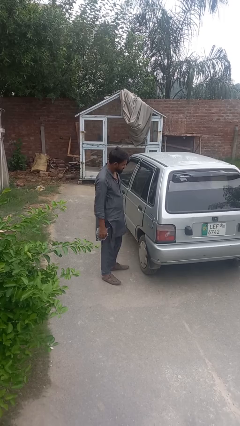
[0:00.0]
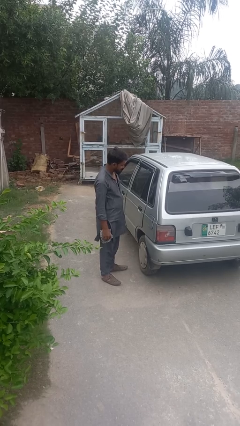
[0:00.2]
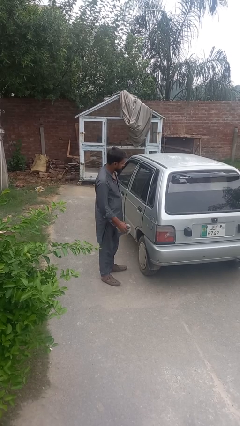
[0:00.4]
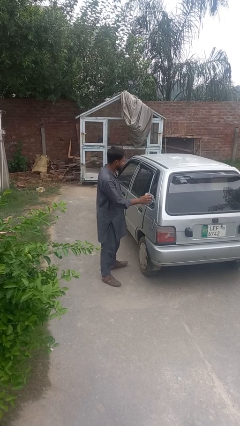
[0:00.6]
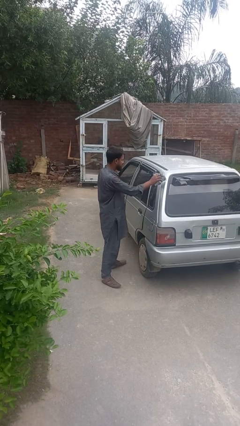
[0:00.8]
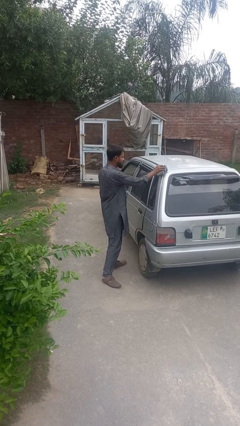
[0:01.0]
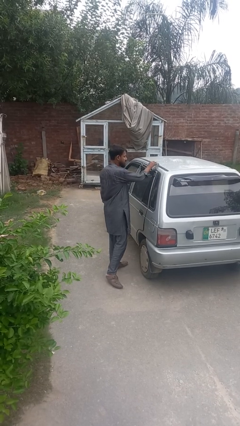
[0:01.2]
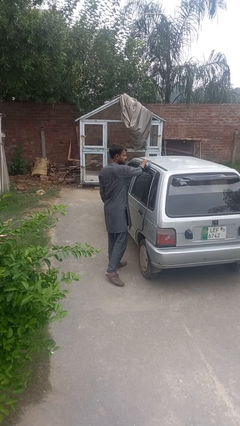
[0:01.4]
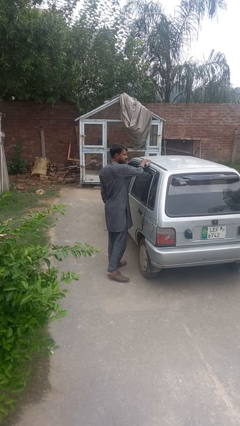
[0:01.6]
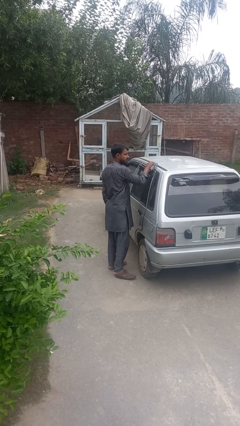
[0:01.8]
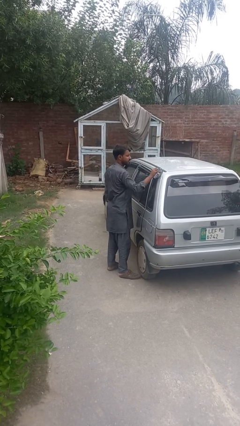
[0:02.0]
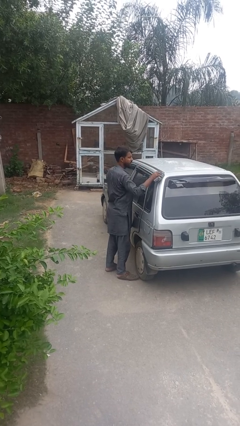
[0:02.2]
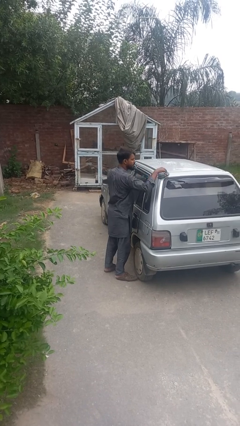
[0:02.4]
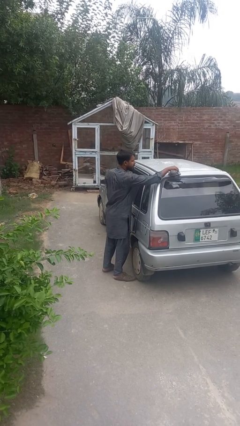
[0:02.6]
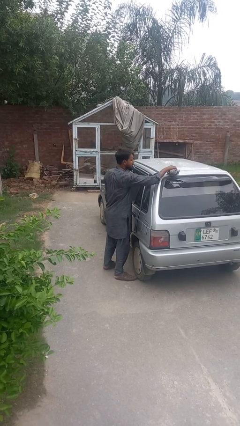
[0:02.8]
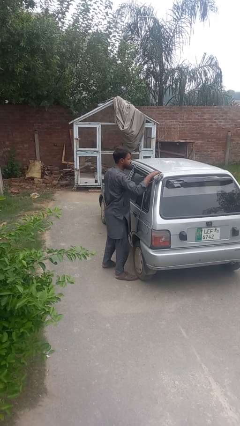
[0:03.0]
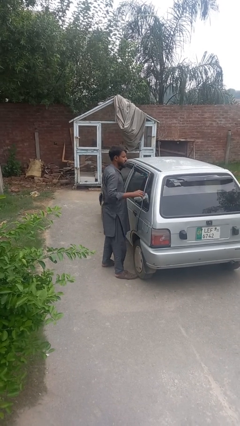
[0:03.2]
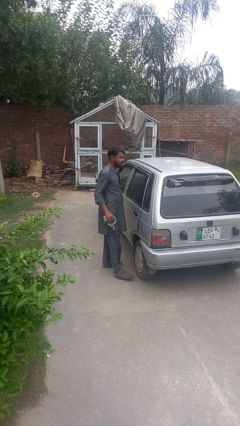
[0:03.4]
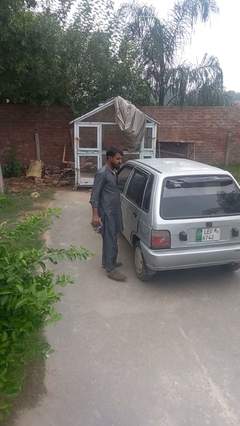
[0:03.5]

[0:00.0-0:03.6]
person polishes car with rag

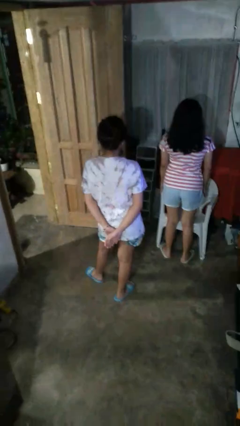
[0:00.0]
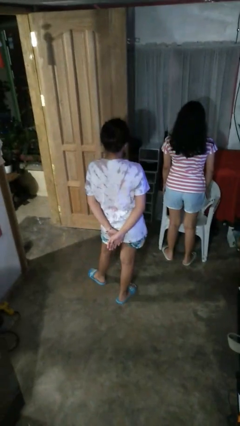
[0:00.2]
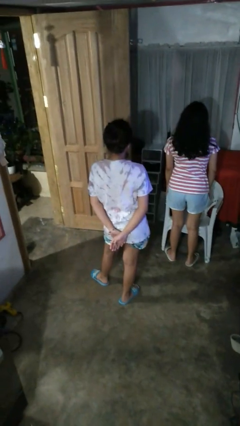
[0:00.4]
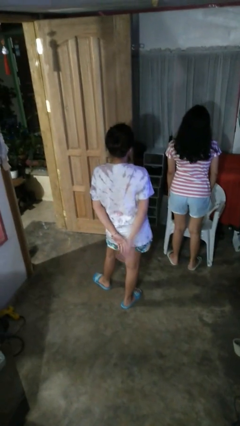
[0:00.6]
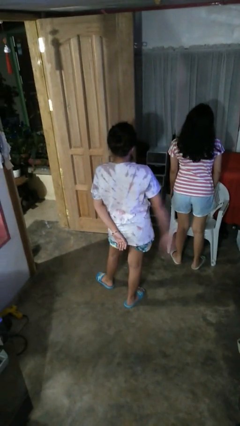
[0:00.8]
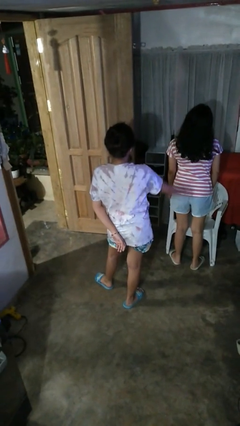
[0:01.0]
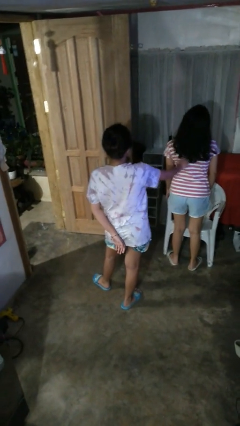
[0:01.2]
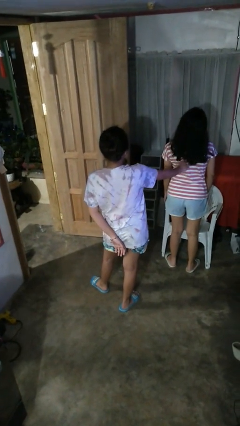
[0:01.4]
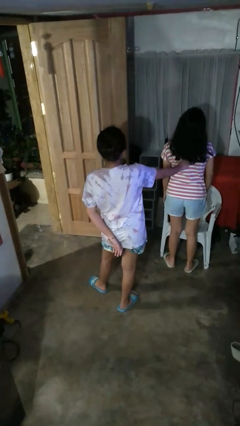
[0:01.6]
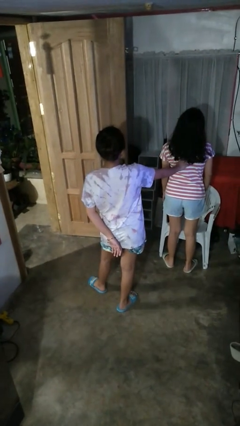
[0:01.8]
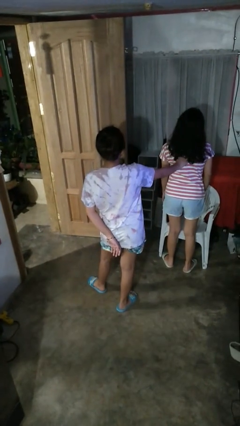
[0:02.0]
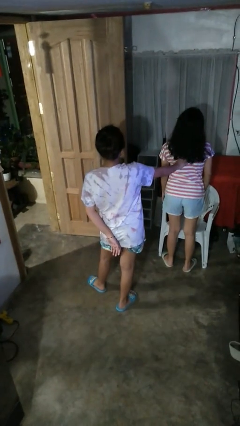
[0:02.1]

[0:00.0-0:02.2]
person touches back of person

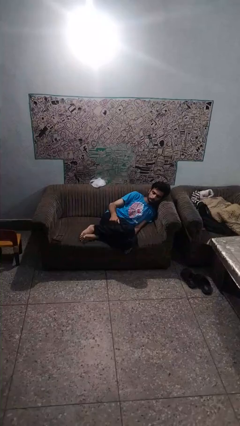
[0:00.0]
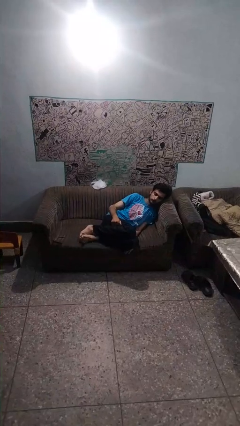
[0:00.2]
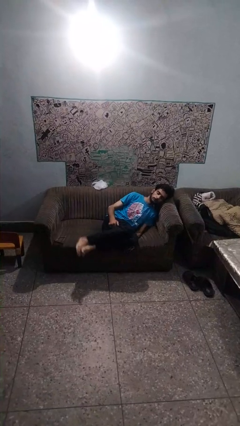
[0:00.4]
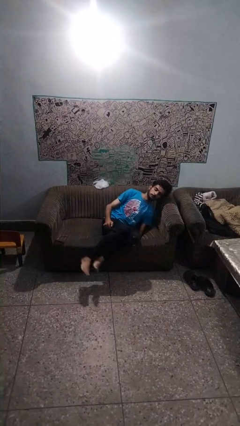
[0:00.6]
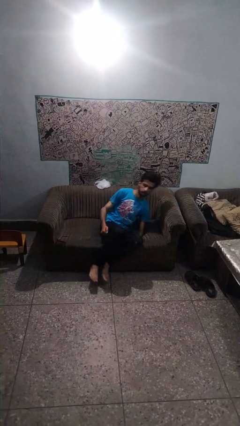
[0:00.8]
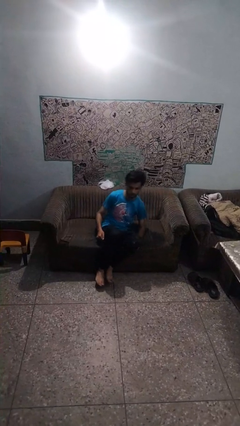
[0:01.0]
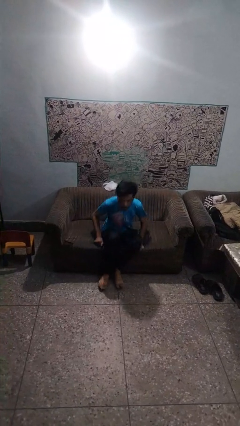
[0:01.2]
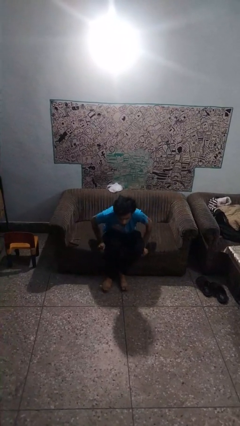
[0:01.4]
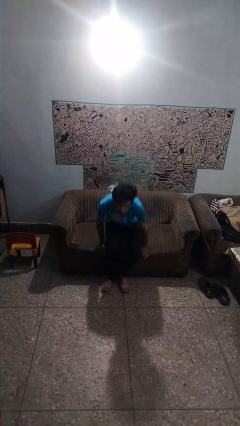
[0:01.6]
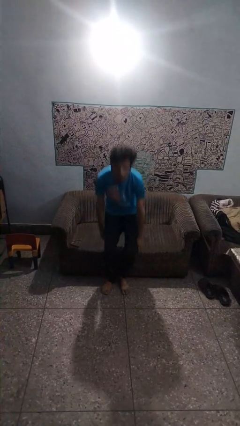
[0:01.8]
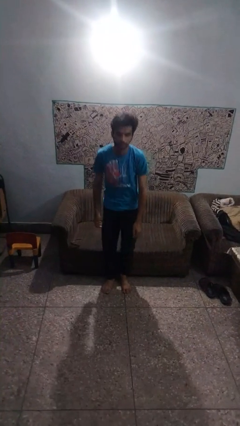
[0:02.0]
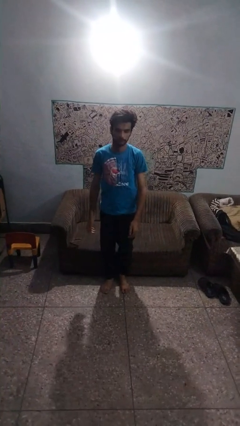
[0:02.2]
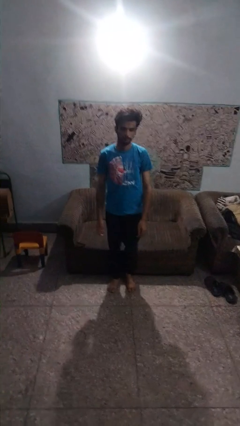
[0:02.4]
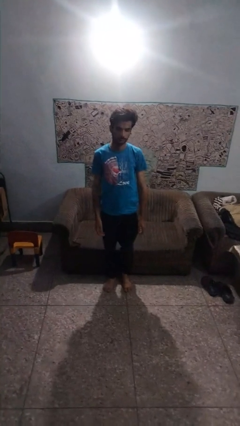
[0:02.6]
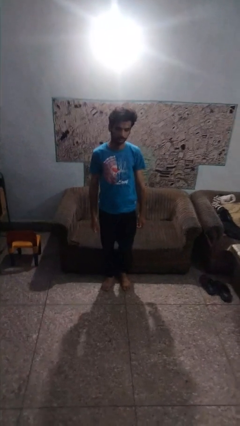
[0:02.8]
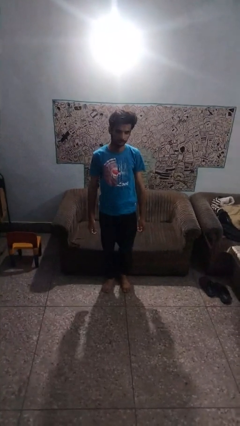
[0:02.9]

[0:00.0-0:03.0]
person stands up

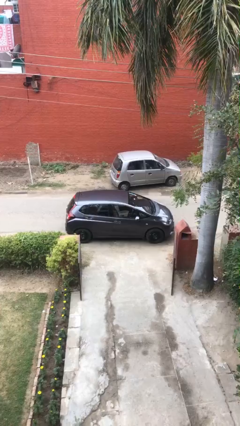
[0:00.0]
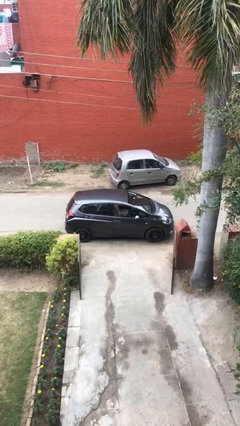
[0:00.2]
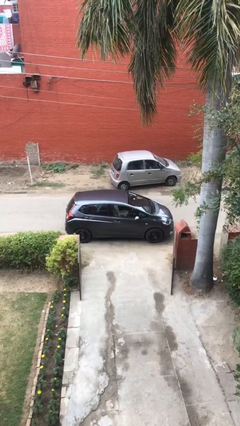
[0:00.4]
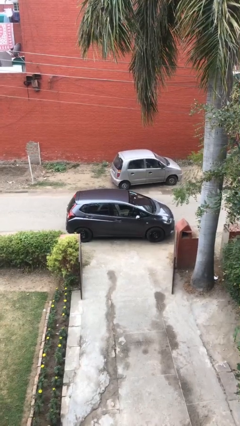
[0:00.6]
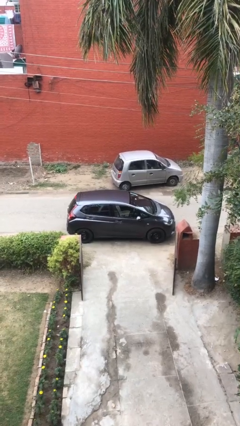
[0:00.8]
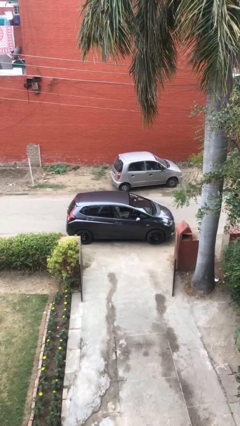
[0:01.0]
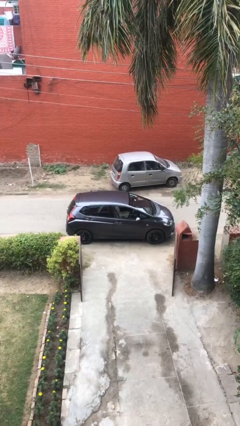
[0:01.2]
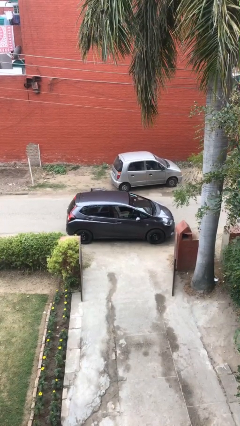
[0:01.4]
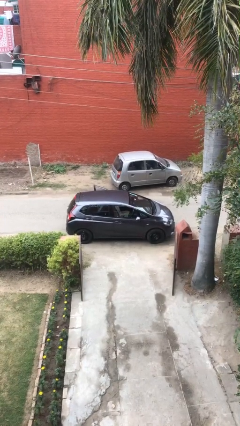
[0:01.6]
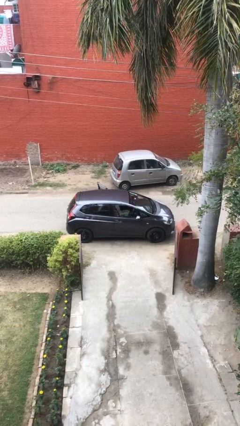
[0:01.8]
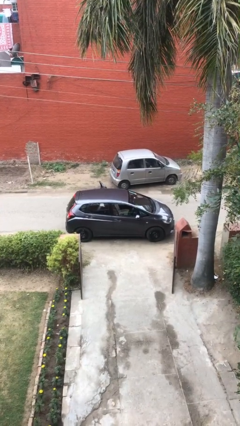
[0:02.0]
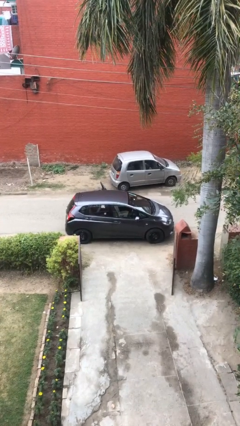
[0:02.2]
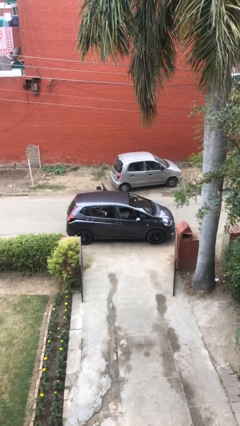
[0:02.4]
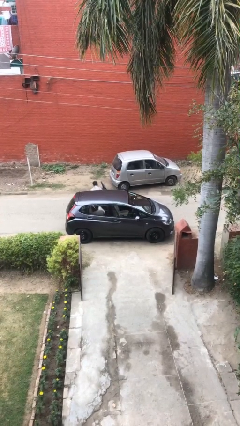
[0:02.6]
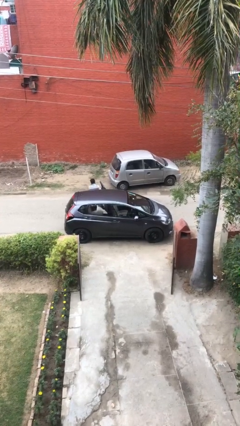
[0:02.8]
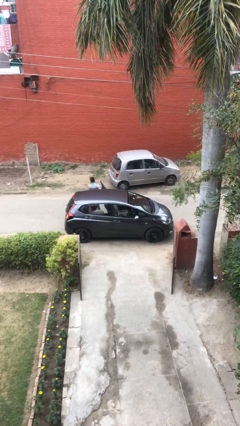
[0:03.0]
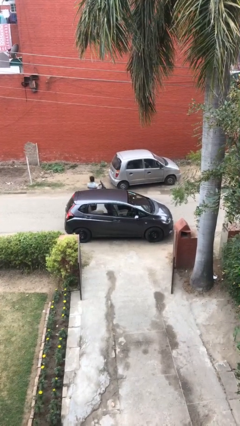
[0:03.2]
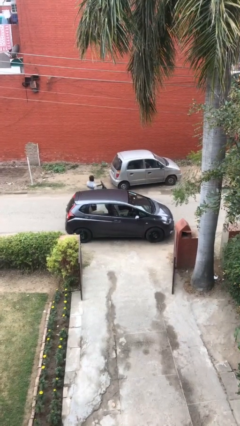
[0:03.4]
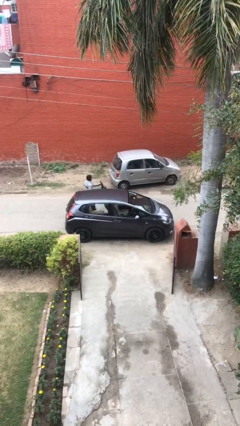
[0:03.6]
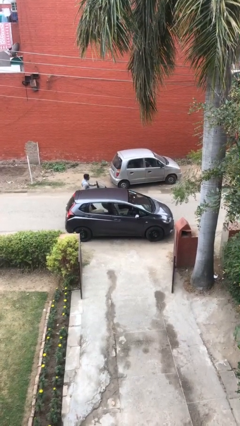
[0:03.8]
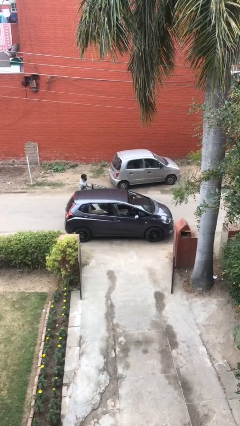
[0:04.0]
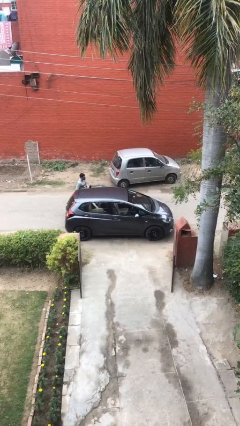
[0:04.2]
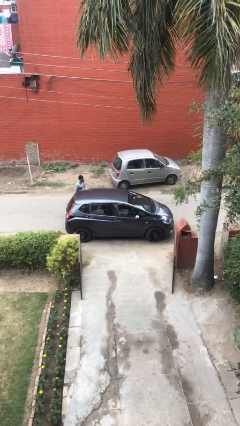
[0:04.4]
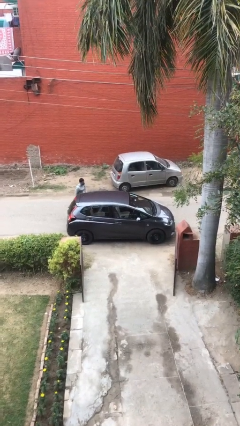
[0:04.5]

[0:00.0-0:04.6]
car drops off person

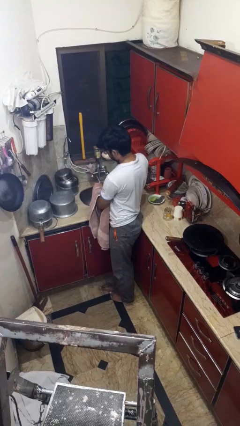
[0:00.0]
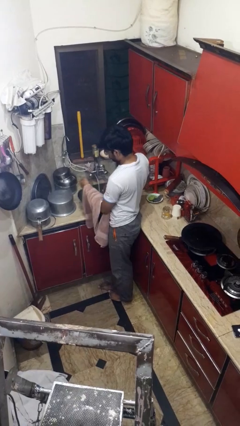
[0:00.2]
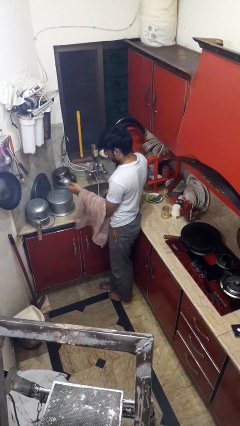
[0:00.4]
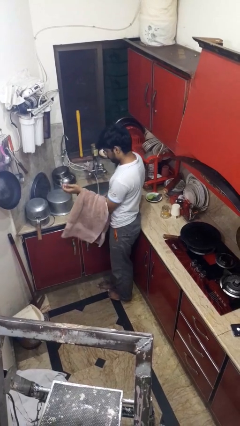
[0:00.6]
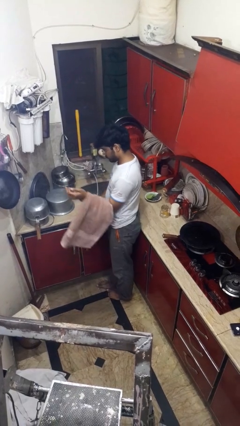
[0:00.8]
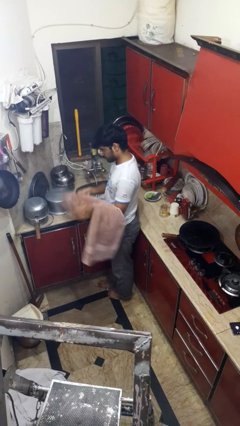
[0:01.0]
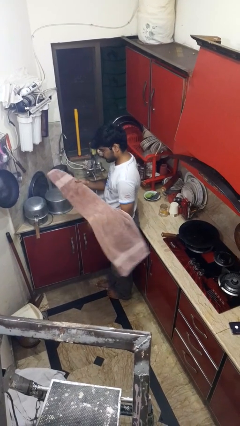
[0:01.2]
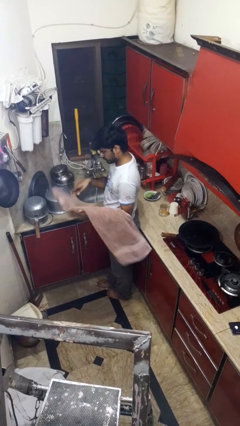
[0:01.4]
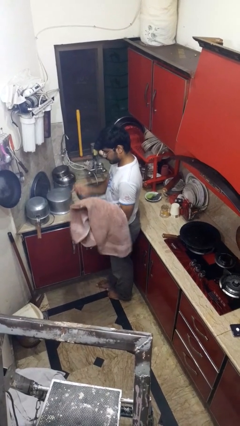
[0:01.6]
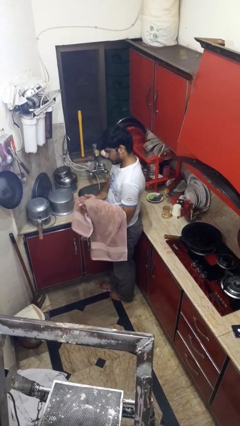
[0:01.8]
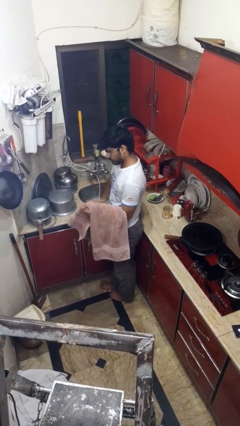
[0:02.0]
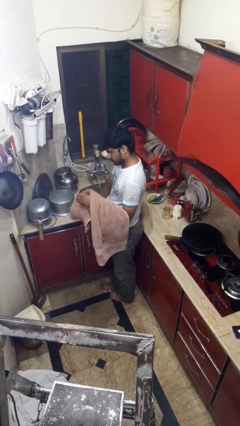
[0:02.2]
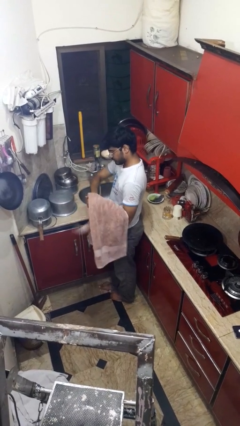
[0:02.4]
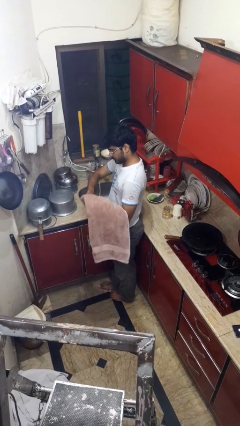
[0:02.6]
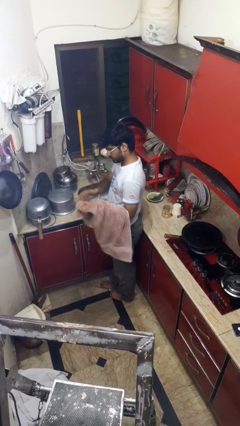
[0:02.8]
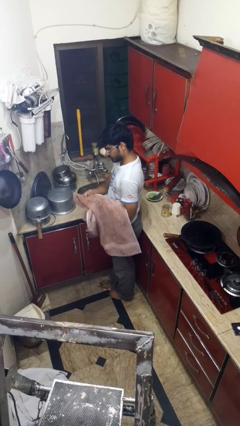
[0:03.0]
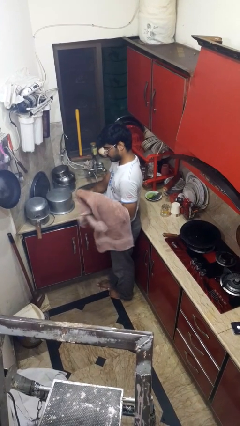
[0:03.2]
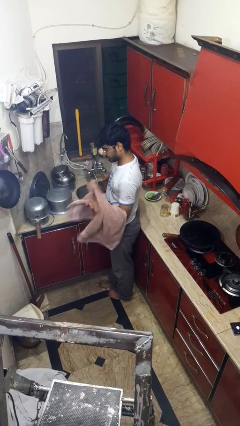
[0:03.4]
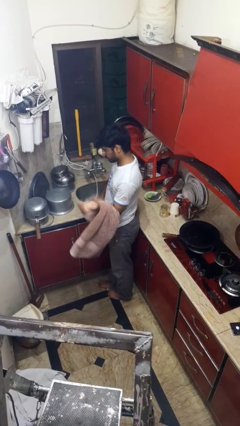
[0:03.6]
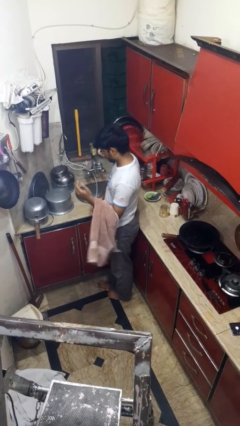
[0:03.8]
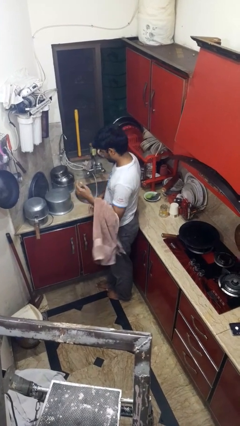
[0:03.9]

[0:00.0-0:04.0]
person dries hands with towel

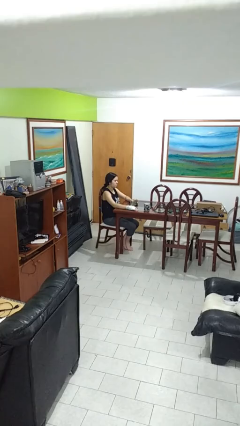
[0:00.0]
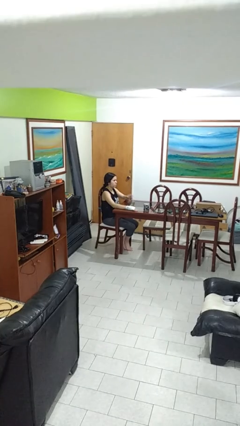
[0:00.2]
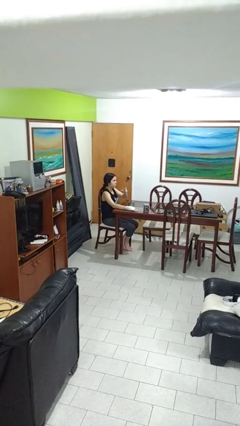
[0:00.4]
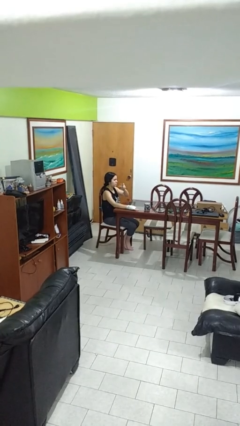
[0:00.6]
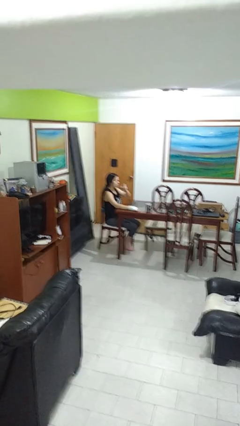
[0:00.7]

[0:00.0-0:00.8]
person picks up object from table
